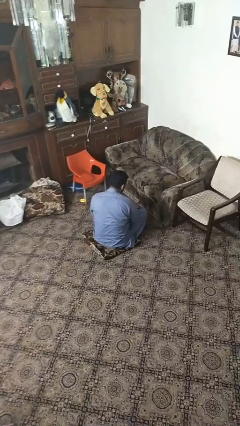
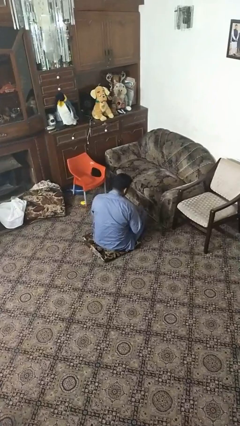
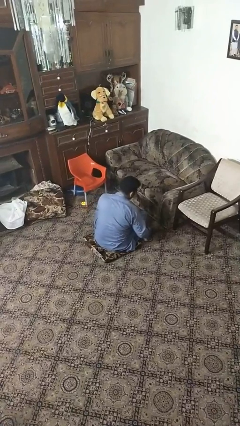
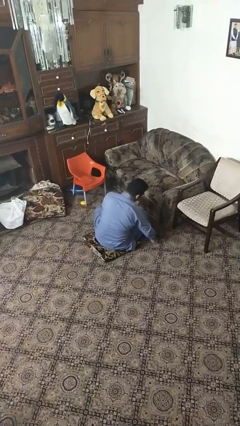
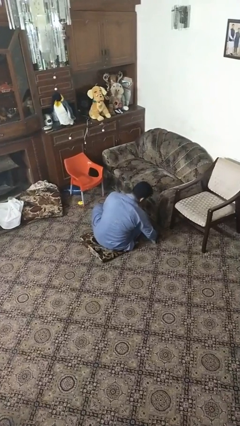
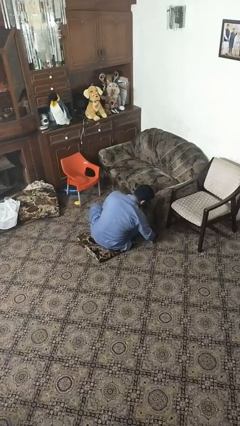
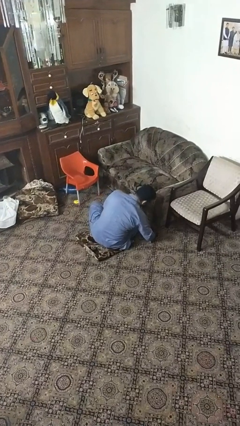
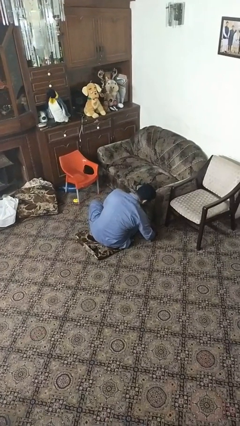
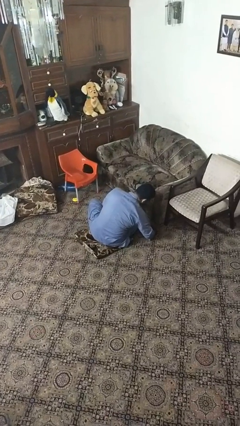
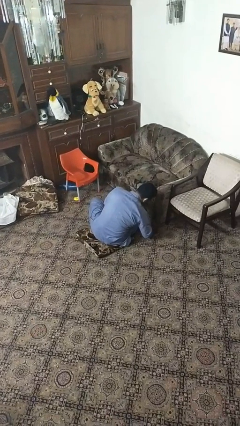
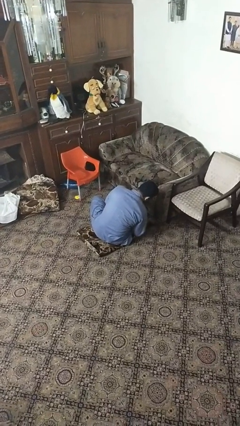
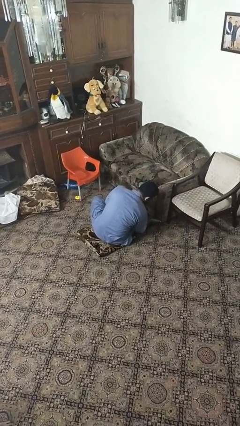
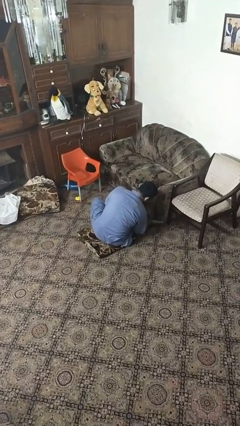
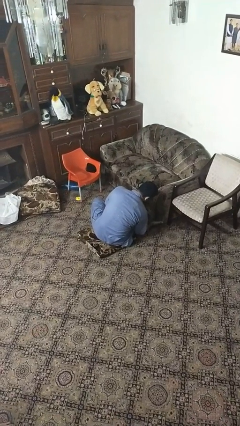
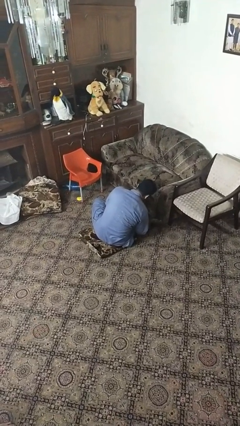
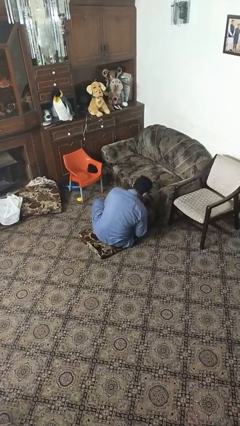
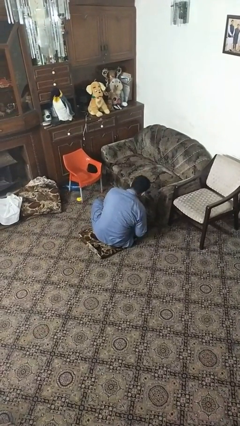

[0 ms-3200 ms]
person searches under couch

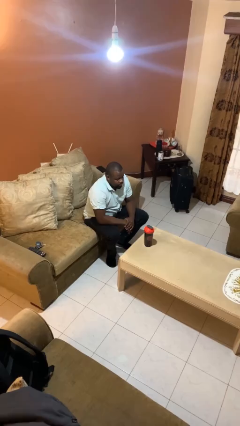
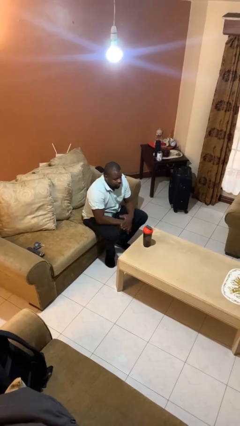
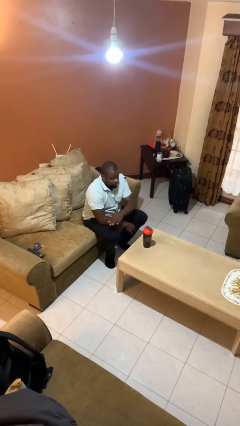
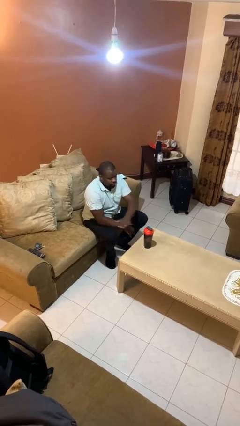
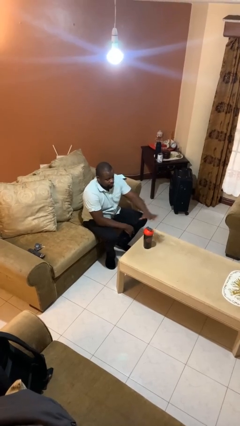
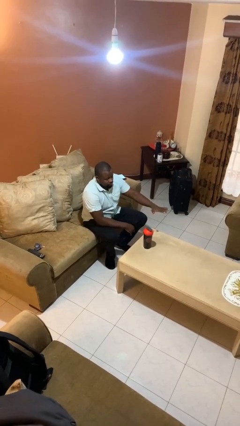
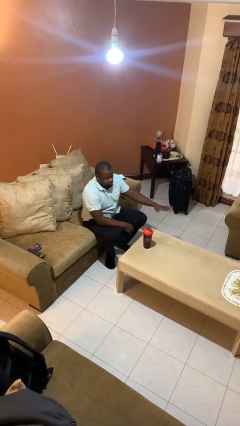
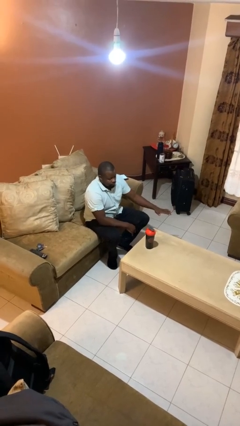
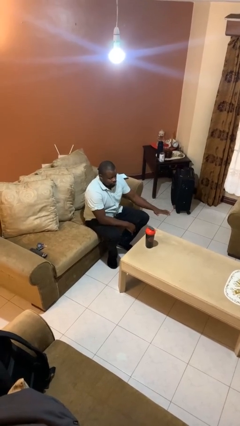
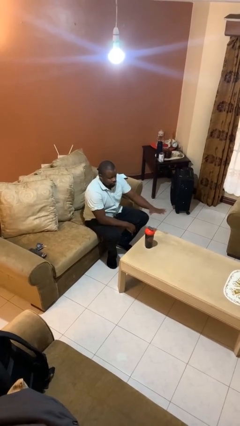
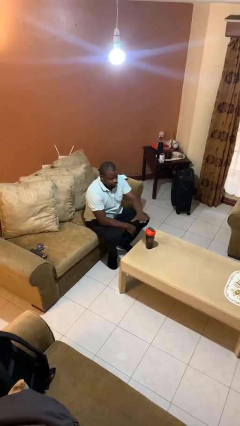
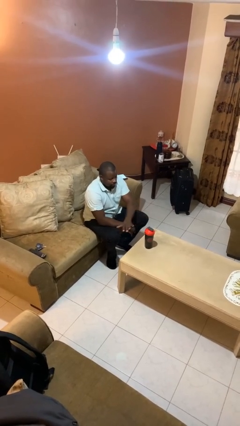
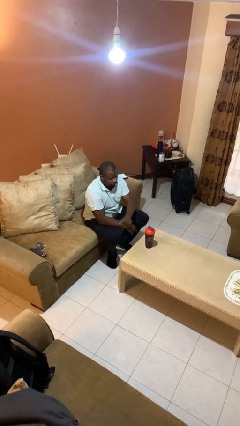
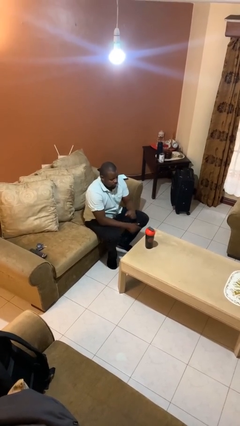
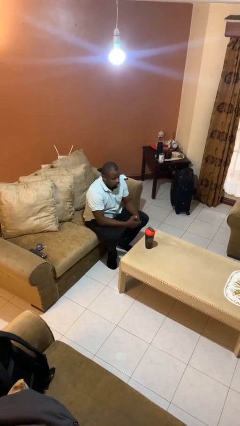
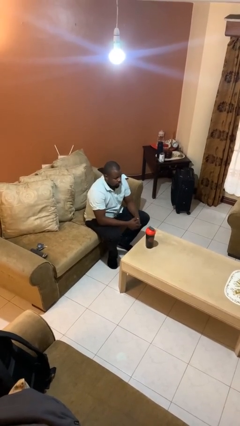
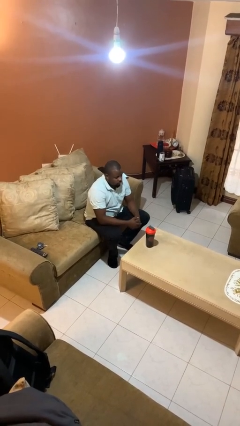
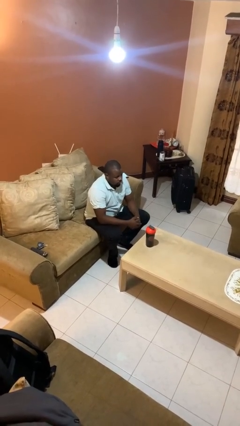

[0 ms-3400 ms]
person waves hand over object

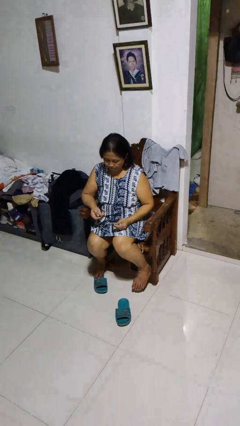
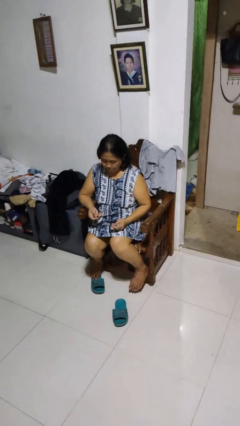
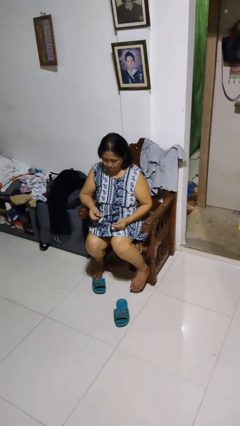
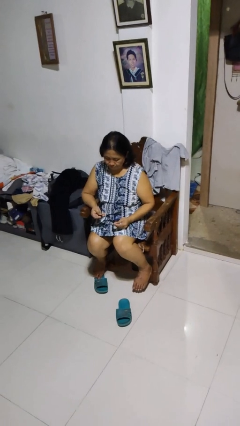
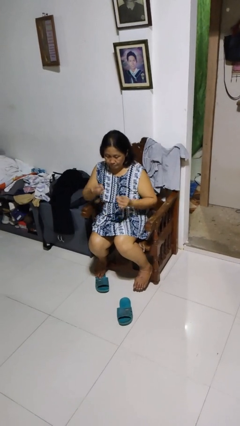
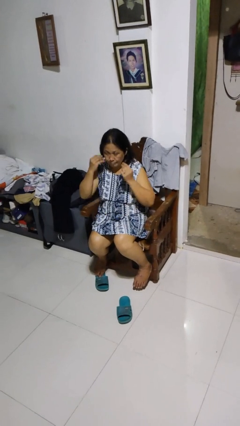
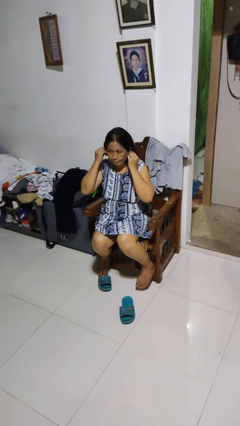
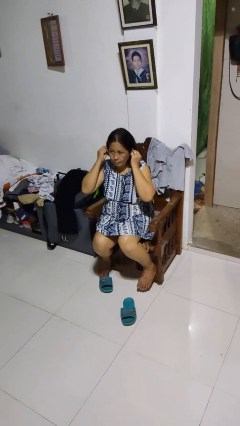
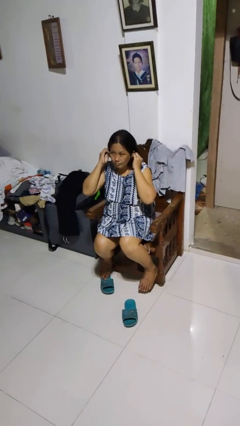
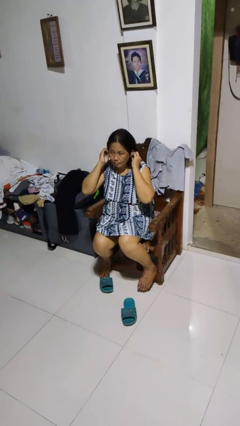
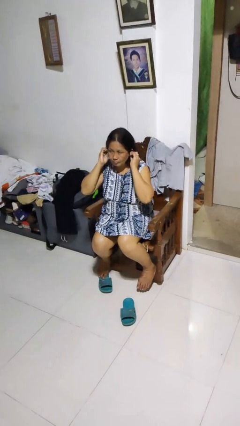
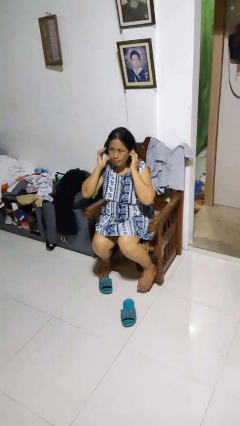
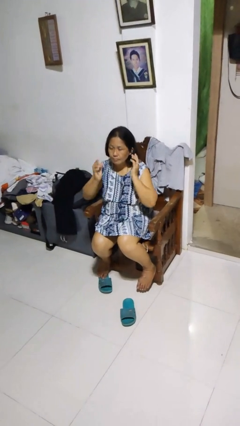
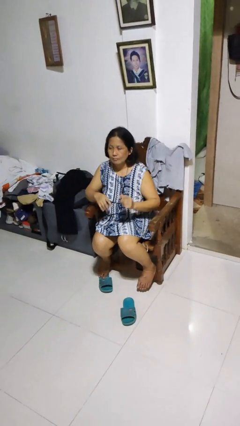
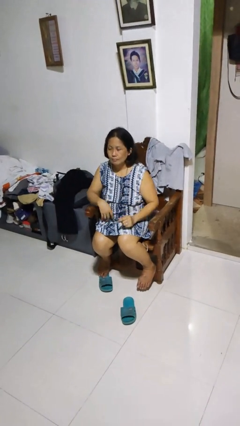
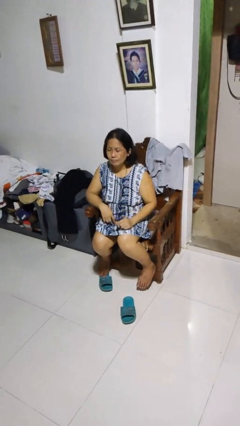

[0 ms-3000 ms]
person puts on headphones

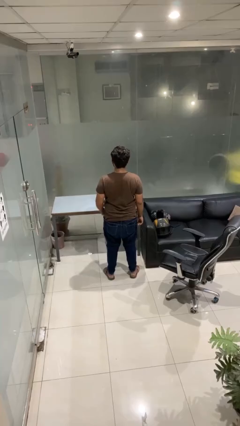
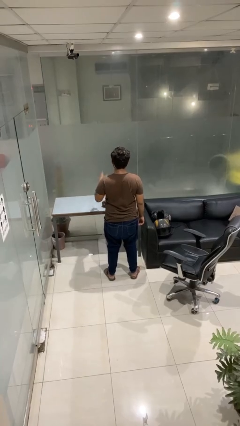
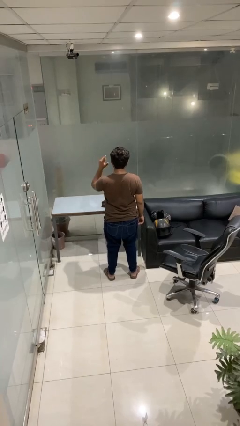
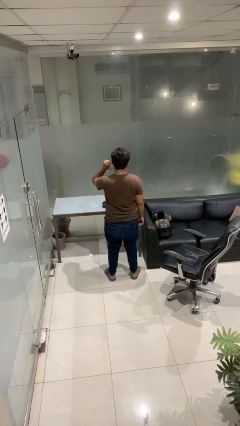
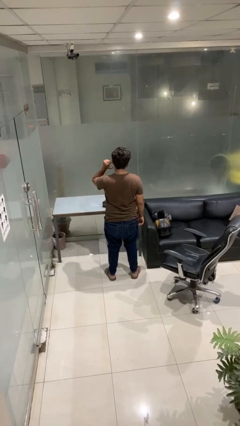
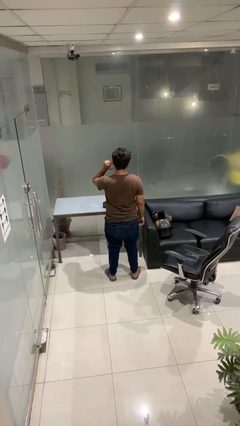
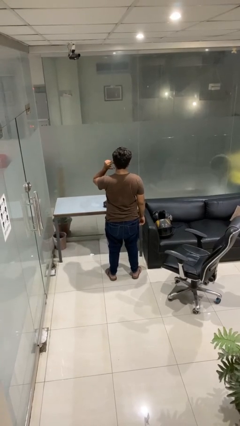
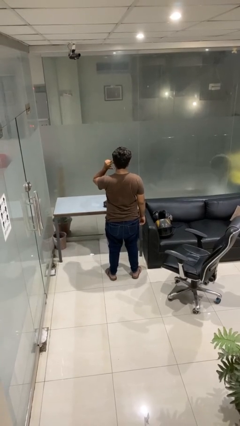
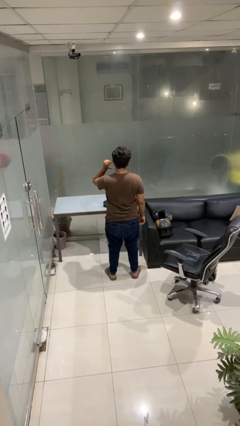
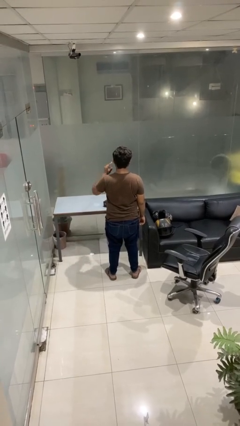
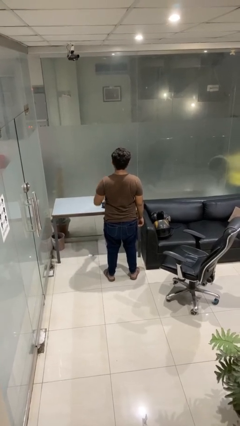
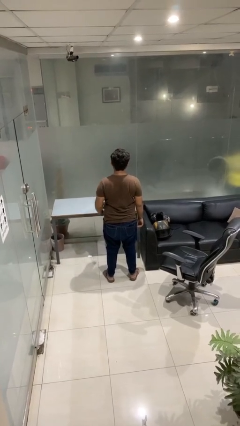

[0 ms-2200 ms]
person gestures listen closely

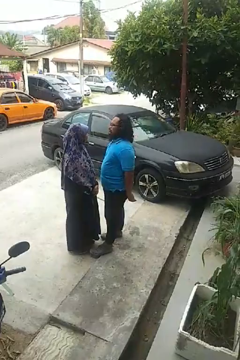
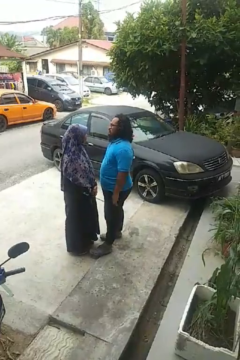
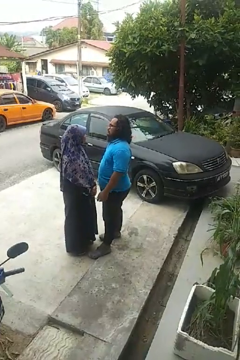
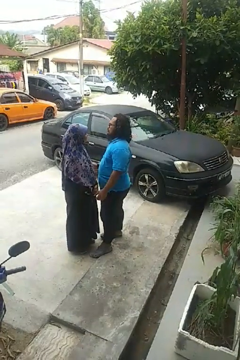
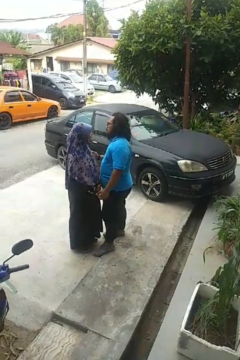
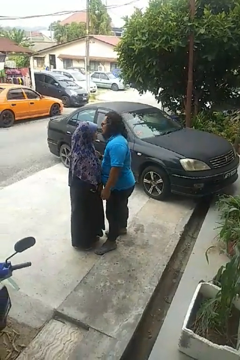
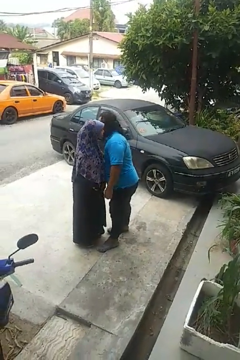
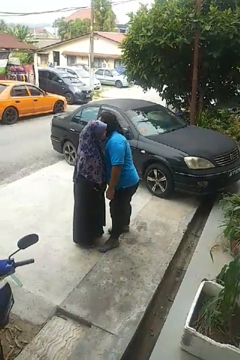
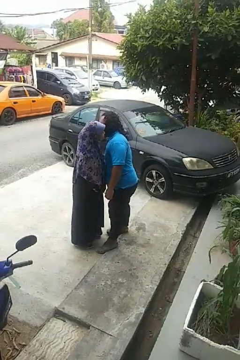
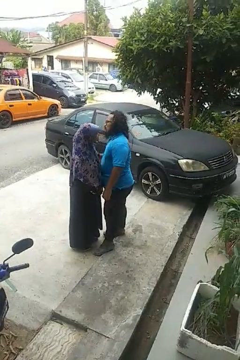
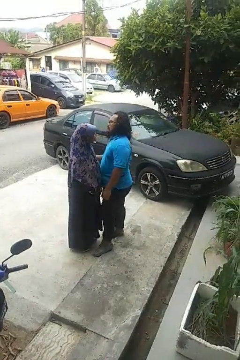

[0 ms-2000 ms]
person kisses cheek of person

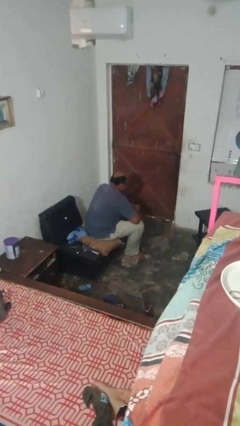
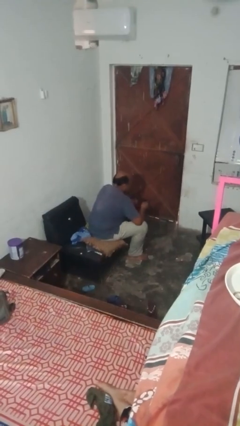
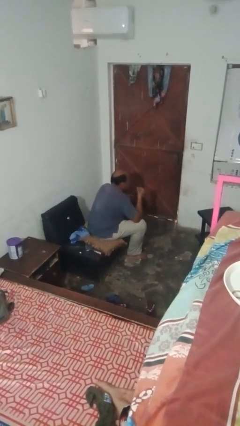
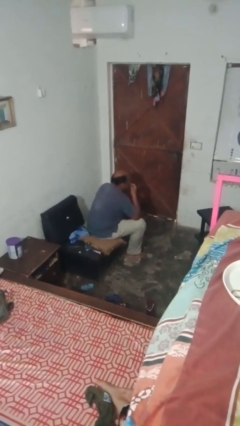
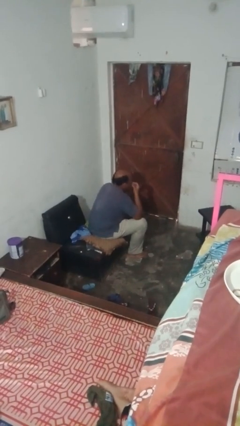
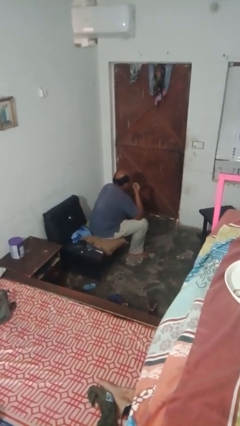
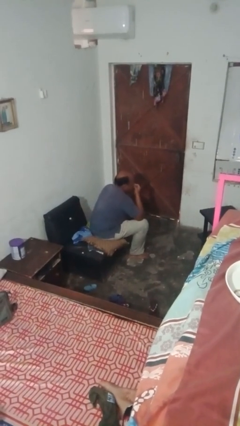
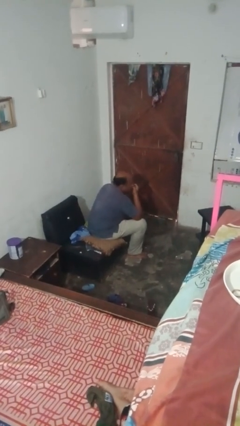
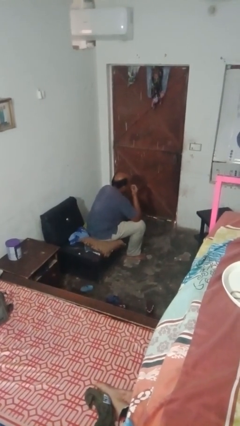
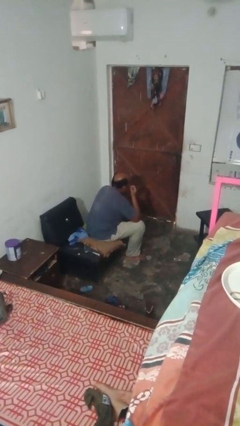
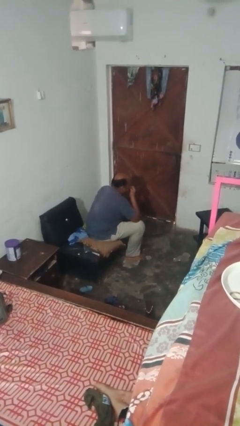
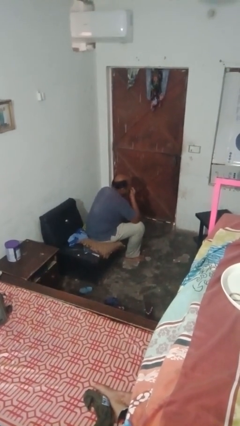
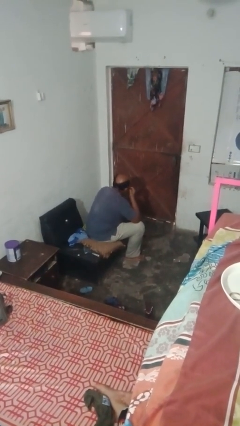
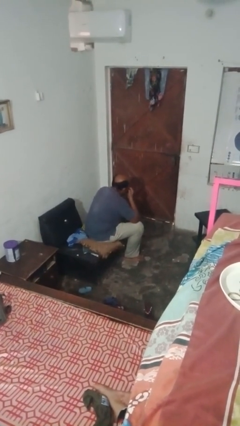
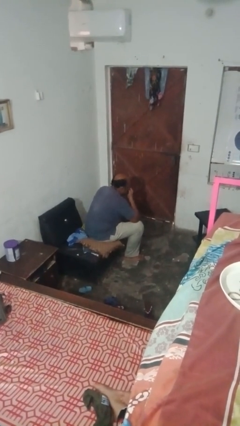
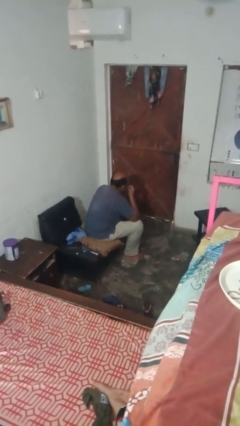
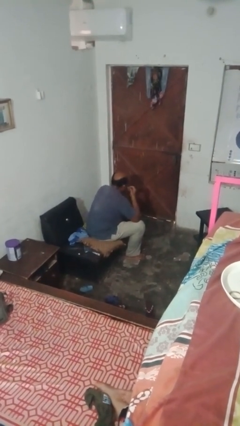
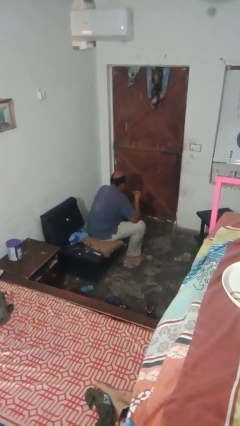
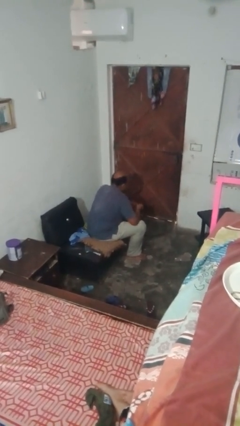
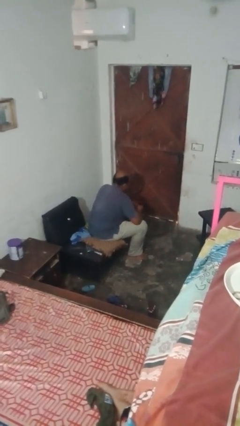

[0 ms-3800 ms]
person applies lip makeup

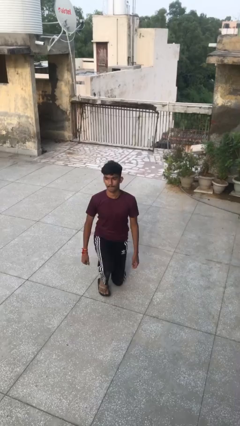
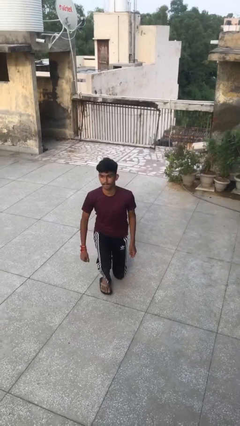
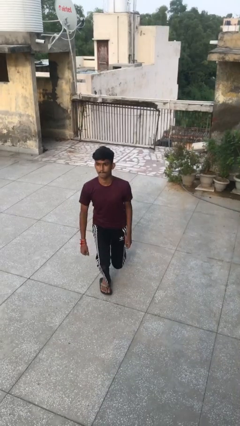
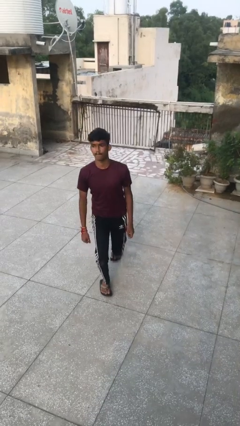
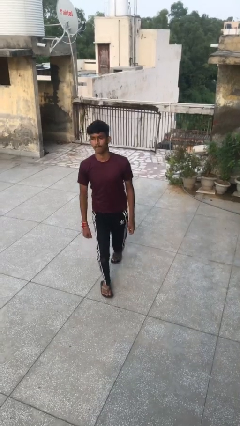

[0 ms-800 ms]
person stands up from floor
